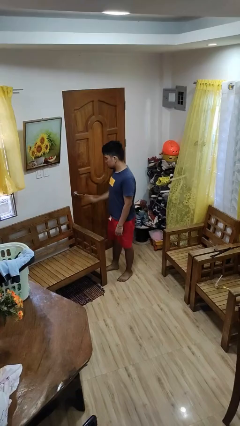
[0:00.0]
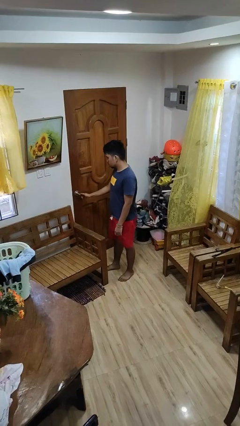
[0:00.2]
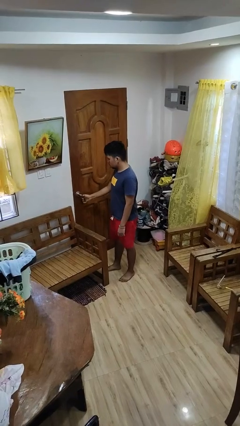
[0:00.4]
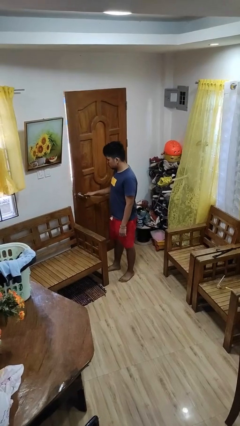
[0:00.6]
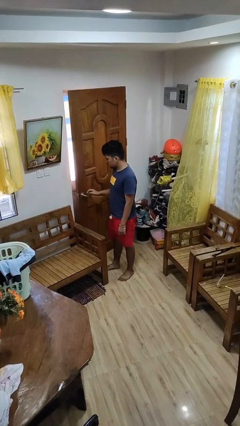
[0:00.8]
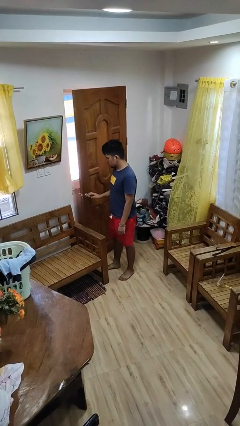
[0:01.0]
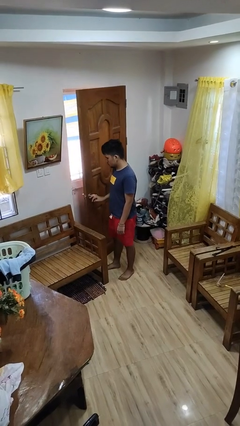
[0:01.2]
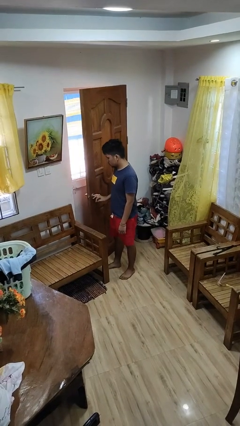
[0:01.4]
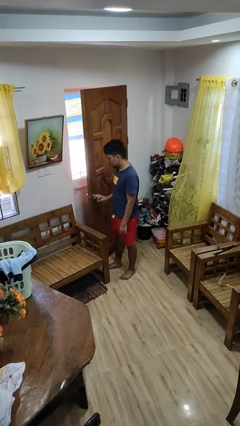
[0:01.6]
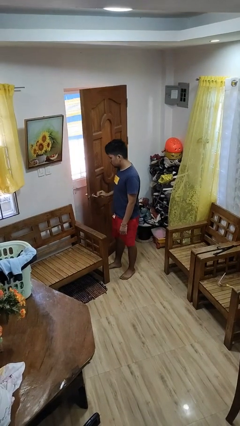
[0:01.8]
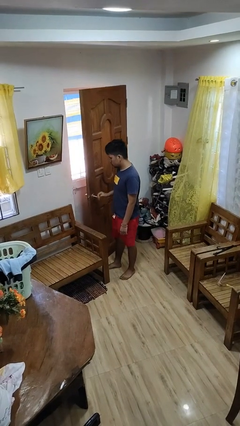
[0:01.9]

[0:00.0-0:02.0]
person opens facility door

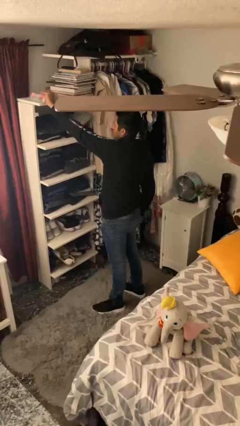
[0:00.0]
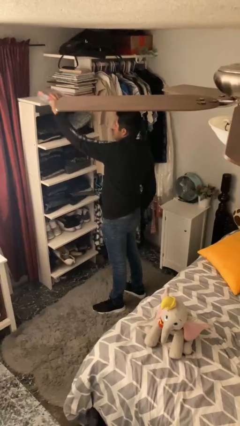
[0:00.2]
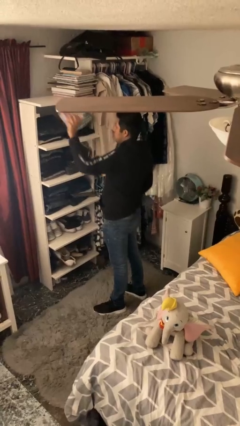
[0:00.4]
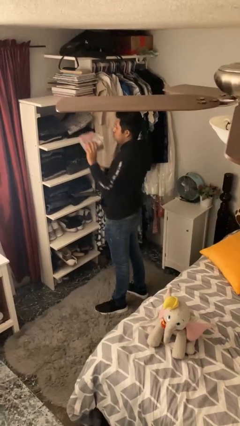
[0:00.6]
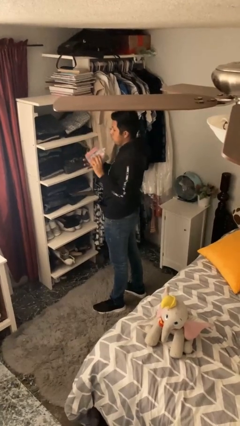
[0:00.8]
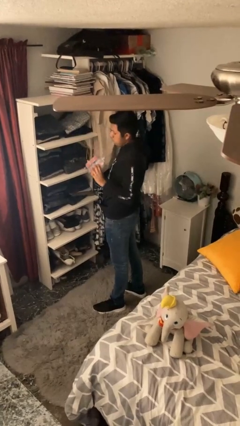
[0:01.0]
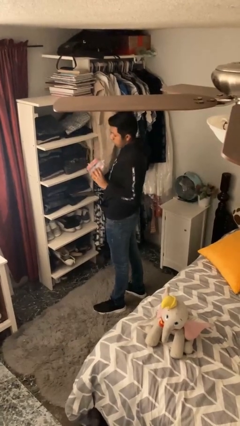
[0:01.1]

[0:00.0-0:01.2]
person picks up object from shelf

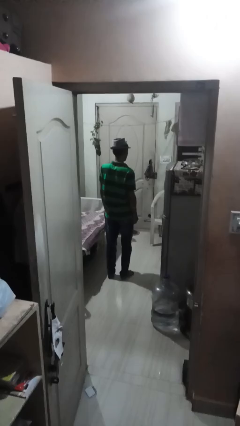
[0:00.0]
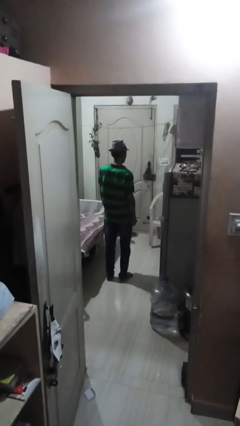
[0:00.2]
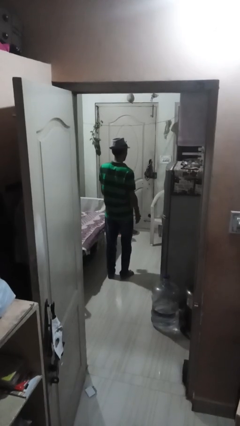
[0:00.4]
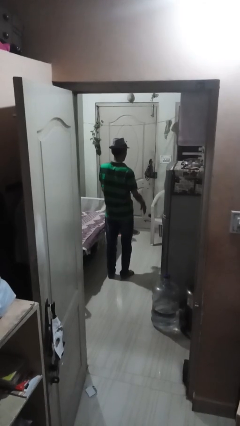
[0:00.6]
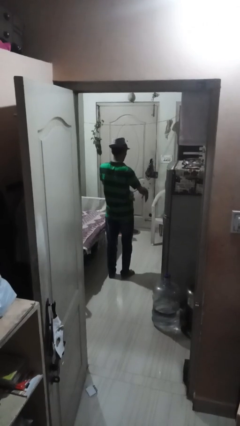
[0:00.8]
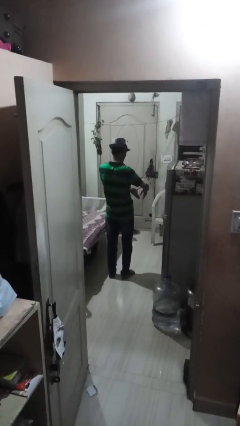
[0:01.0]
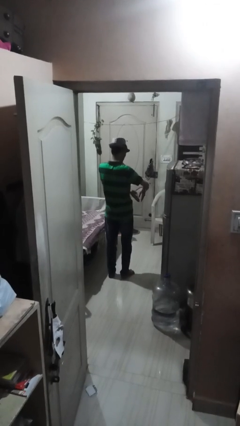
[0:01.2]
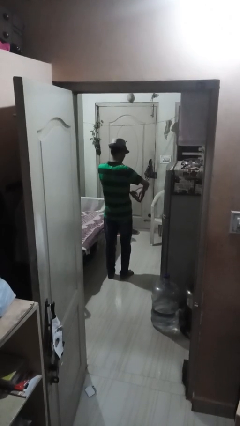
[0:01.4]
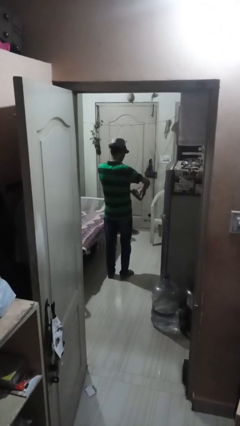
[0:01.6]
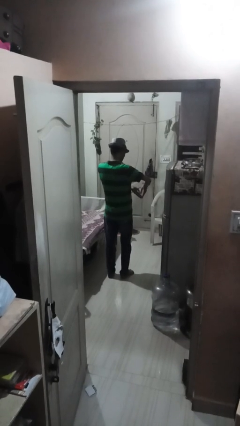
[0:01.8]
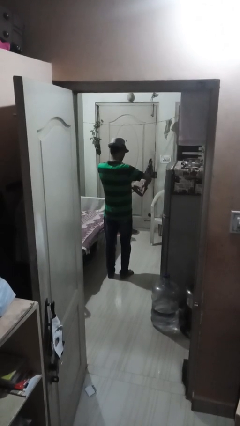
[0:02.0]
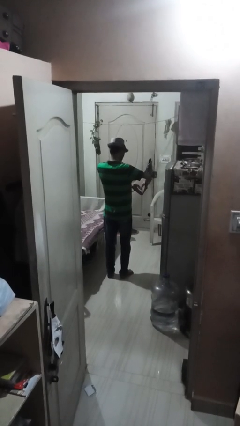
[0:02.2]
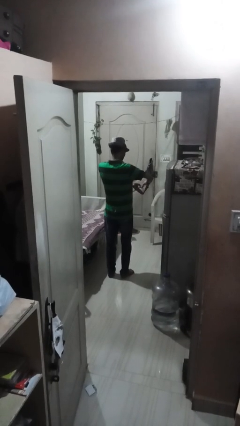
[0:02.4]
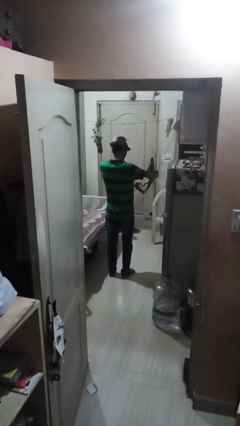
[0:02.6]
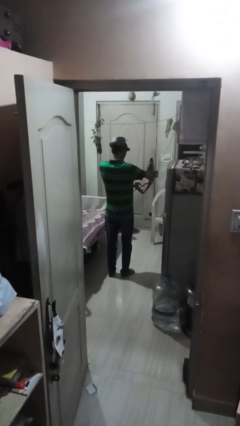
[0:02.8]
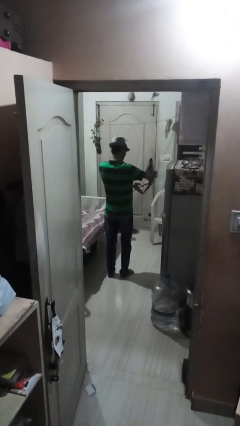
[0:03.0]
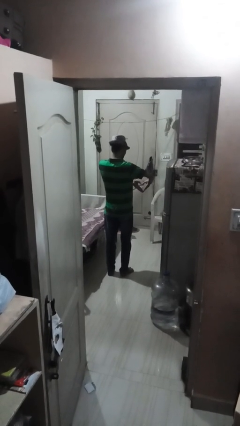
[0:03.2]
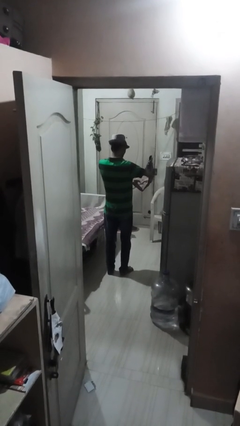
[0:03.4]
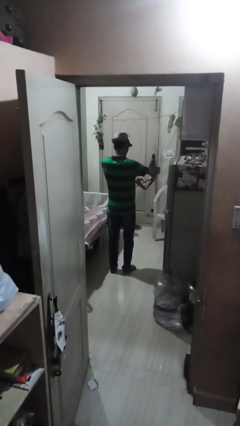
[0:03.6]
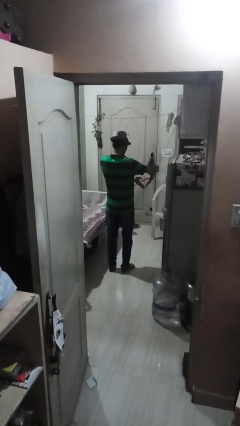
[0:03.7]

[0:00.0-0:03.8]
person gestures heart

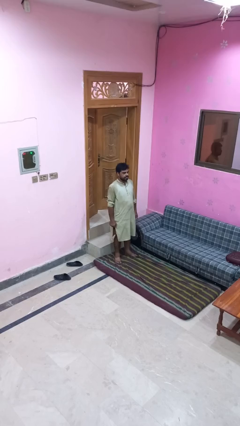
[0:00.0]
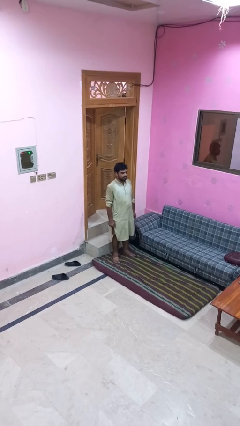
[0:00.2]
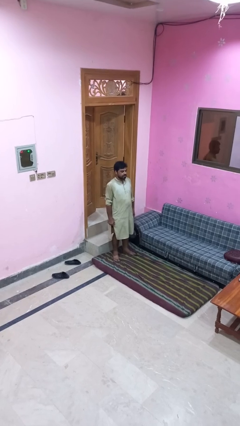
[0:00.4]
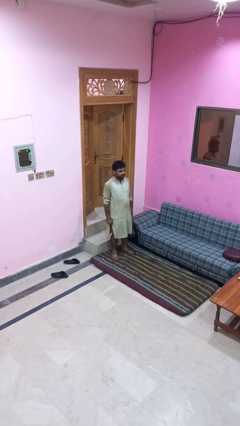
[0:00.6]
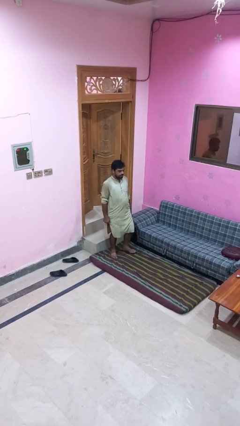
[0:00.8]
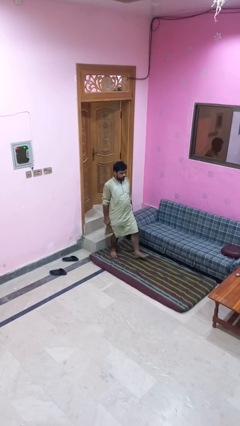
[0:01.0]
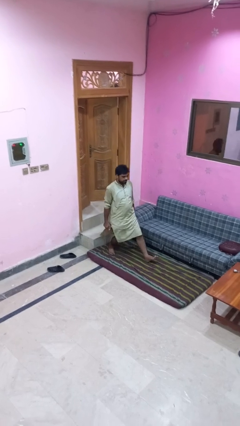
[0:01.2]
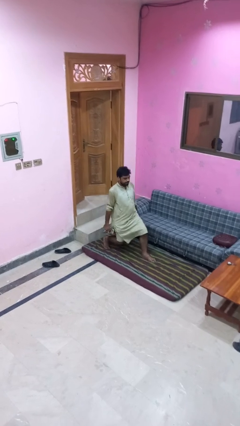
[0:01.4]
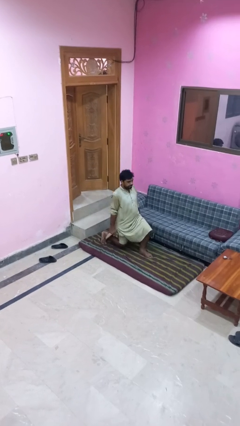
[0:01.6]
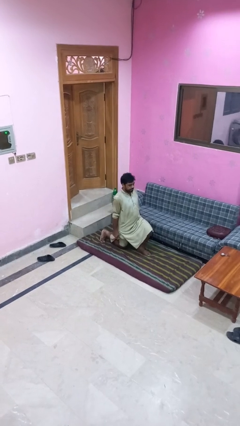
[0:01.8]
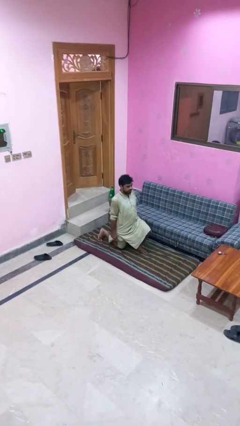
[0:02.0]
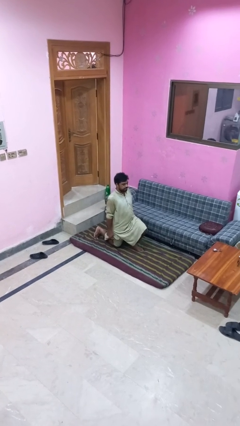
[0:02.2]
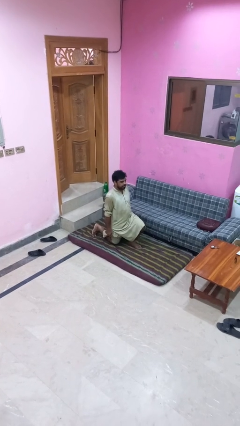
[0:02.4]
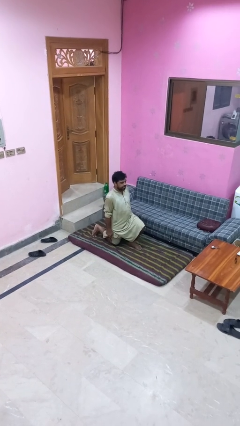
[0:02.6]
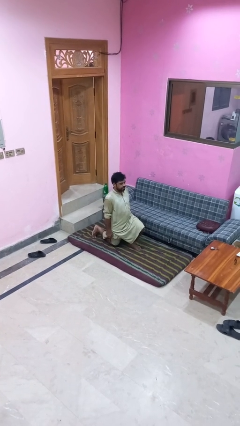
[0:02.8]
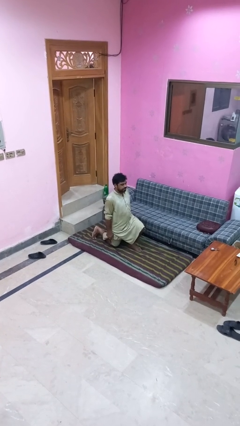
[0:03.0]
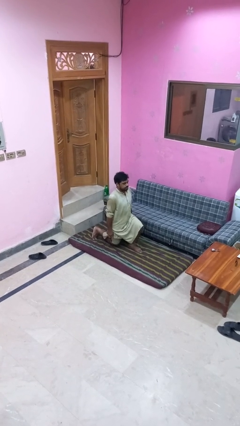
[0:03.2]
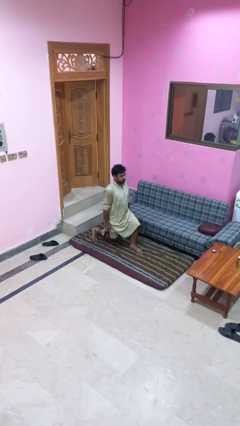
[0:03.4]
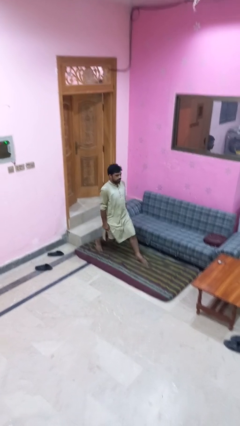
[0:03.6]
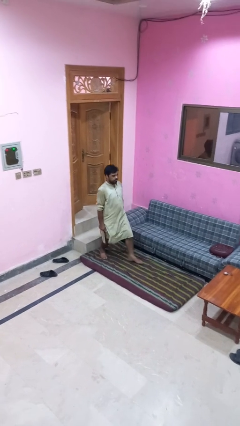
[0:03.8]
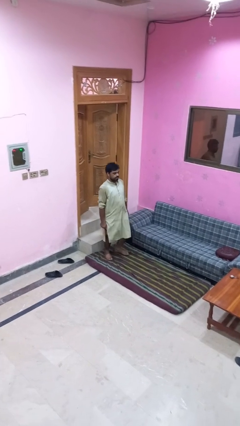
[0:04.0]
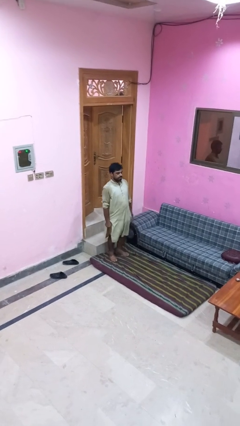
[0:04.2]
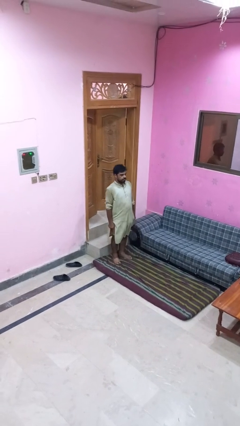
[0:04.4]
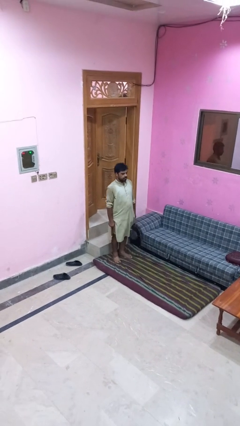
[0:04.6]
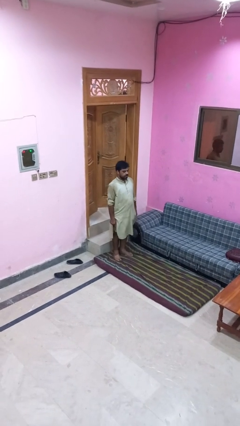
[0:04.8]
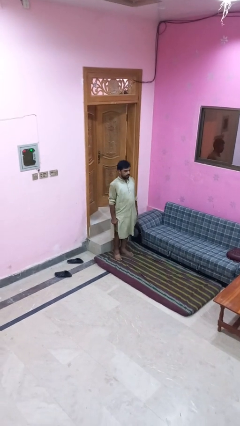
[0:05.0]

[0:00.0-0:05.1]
person exercises with lunges

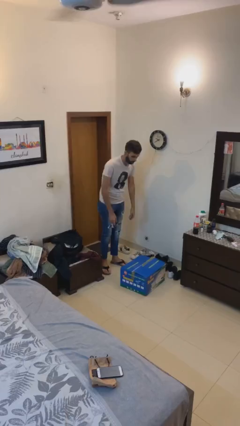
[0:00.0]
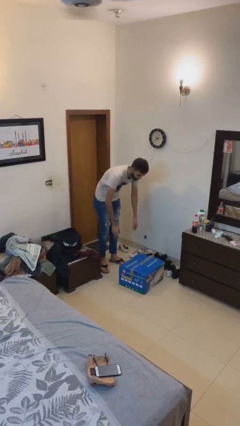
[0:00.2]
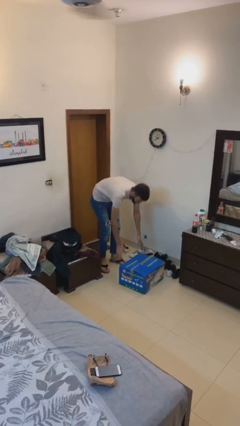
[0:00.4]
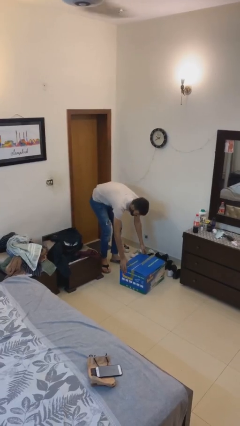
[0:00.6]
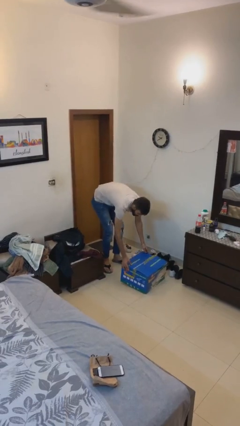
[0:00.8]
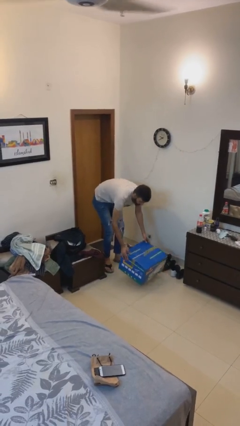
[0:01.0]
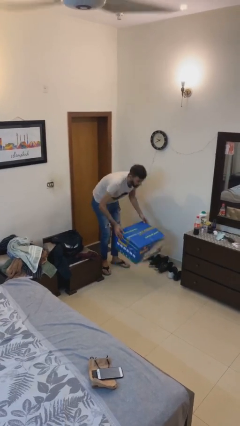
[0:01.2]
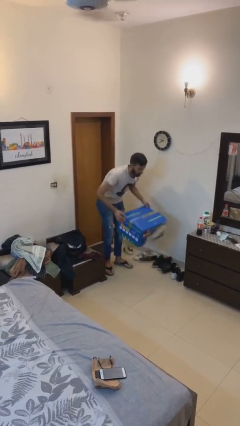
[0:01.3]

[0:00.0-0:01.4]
person picks up object from floor

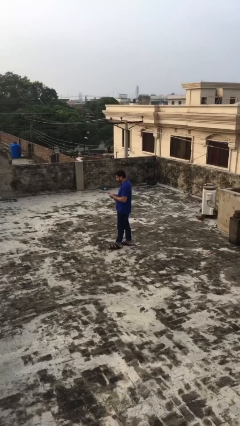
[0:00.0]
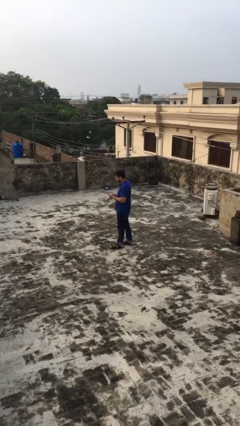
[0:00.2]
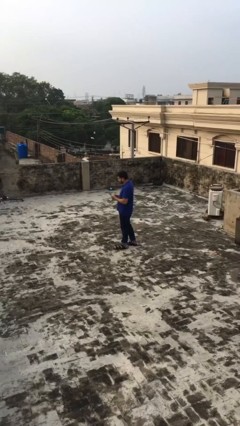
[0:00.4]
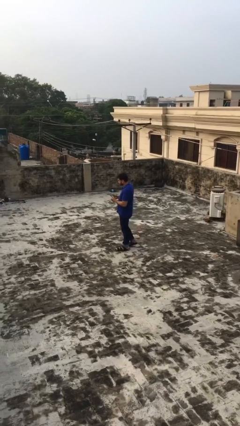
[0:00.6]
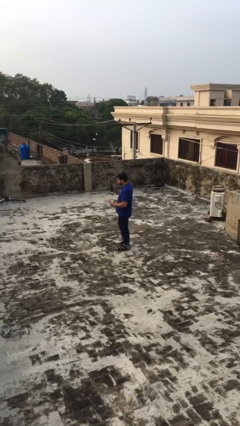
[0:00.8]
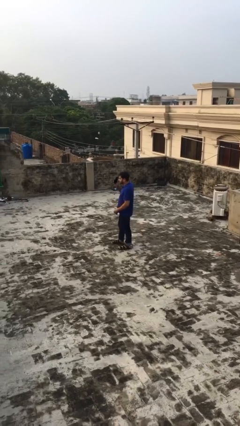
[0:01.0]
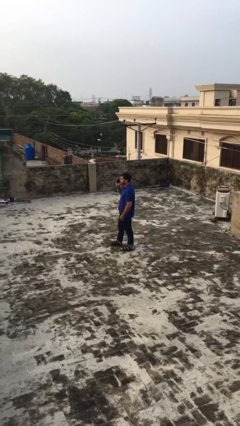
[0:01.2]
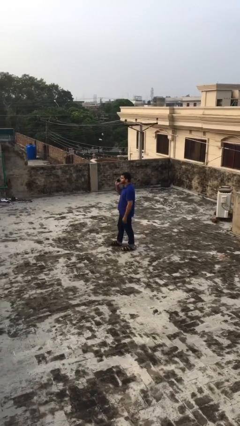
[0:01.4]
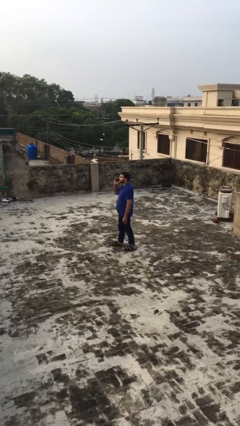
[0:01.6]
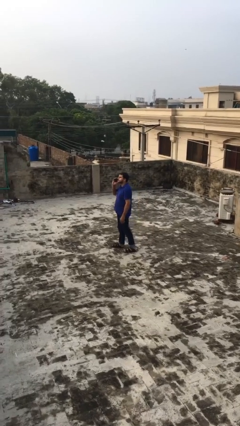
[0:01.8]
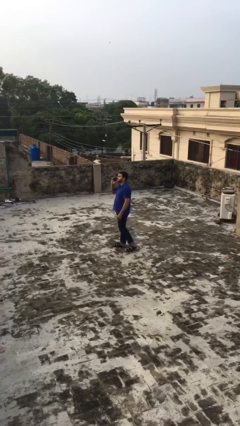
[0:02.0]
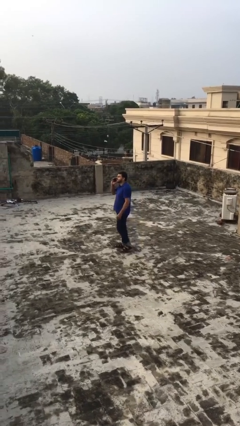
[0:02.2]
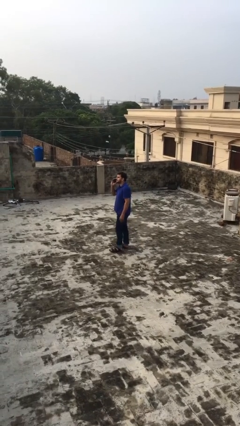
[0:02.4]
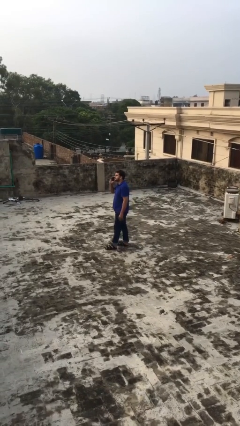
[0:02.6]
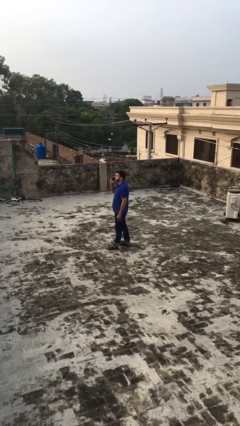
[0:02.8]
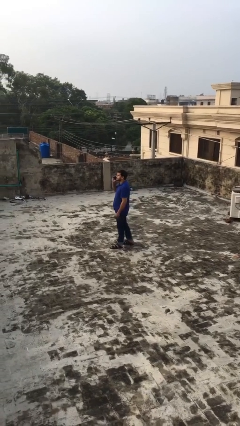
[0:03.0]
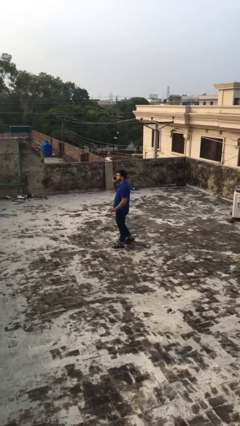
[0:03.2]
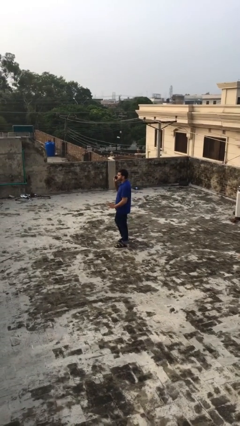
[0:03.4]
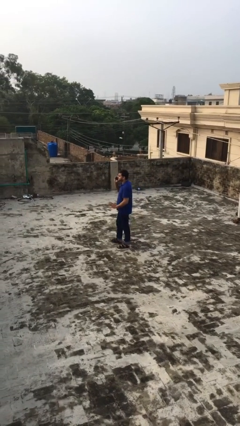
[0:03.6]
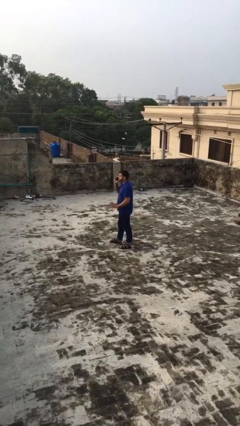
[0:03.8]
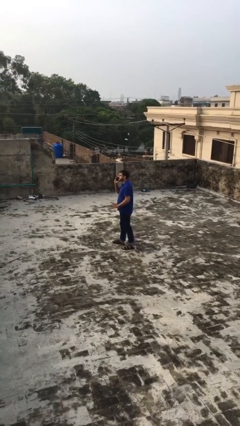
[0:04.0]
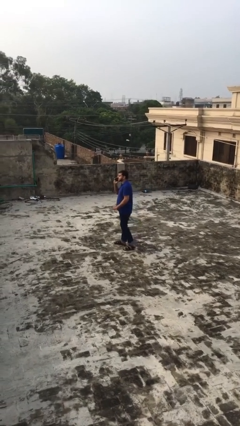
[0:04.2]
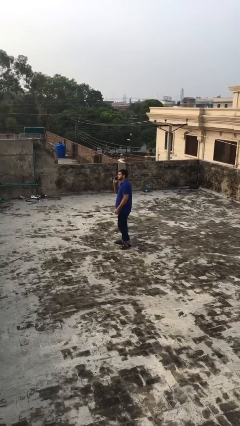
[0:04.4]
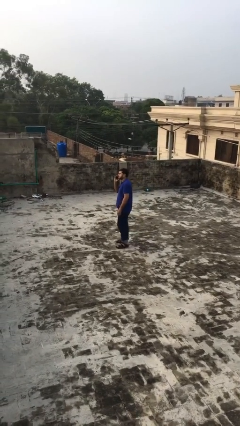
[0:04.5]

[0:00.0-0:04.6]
person talks on phone
